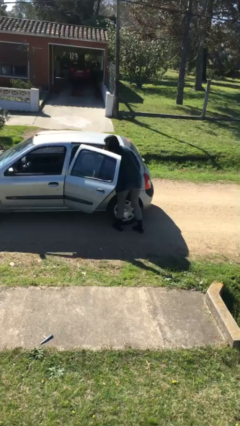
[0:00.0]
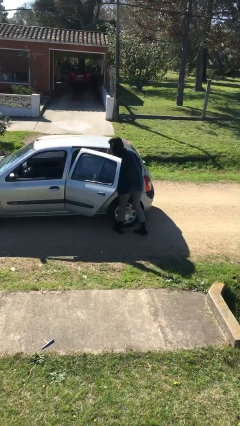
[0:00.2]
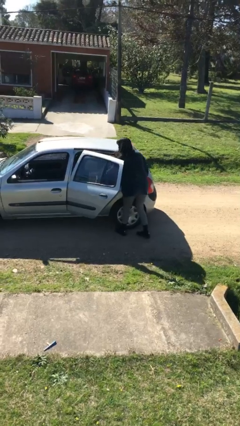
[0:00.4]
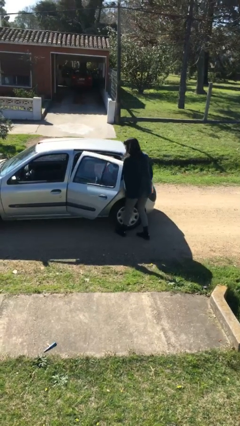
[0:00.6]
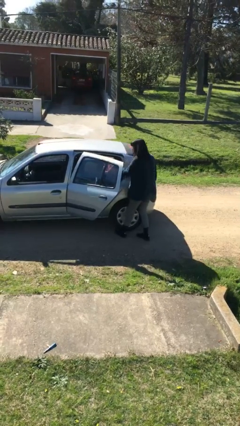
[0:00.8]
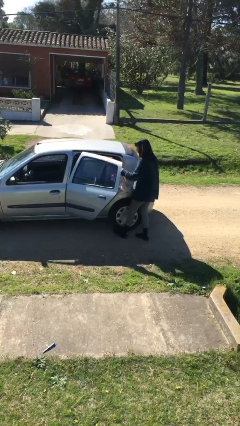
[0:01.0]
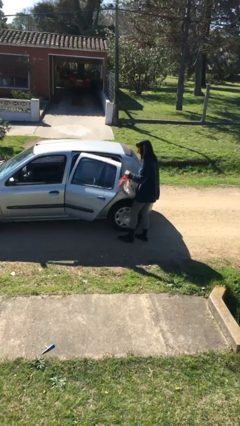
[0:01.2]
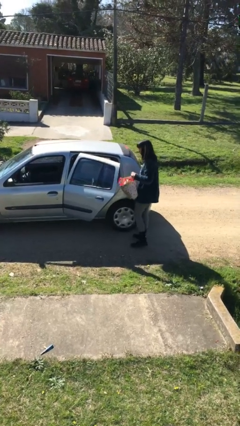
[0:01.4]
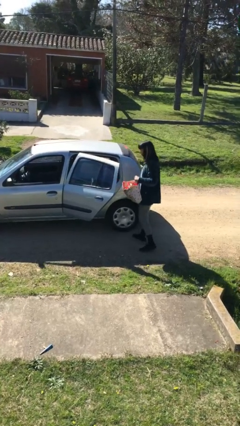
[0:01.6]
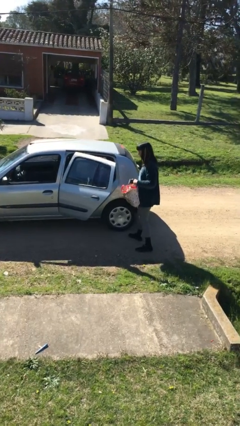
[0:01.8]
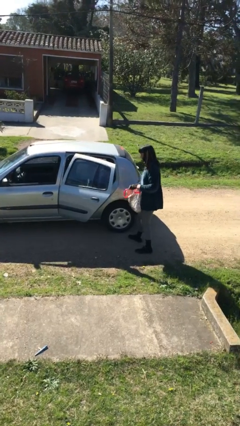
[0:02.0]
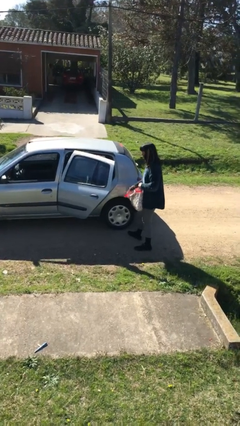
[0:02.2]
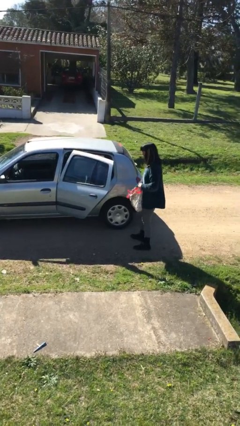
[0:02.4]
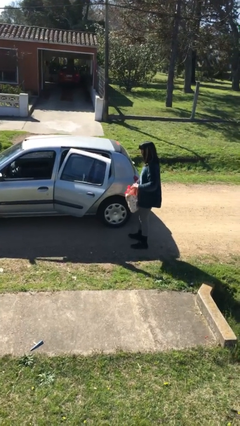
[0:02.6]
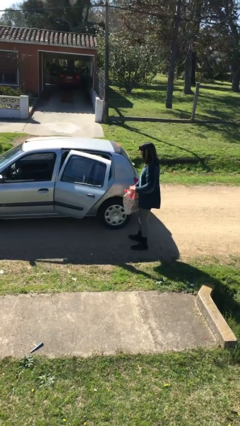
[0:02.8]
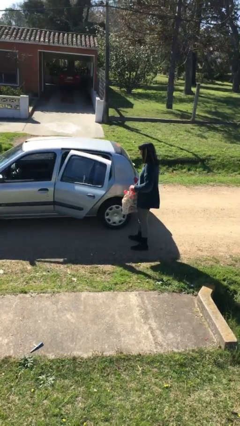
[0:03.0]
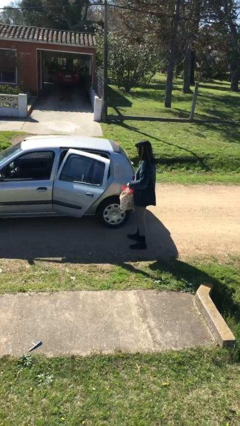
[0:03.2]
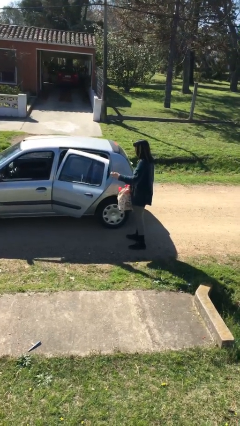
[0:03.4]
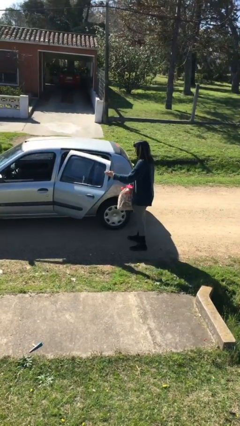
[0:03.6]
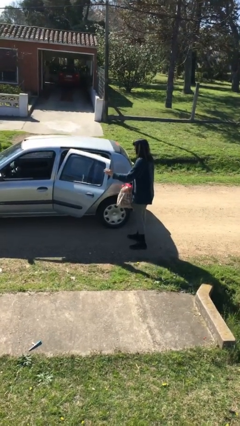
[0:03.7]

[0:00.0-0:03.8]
person unloads car

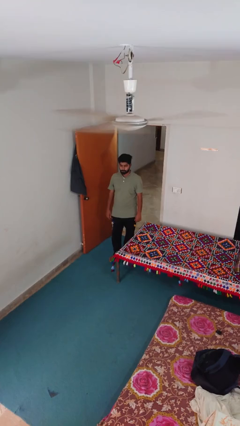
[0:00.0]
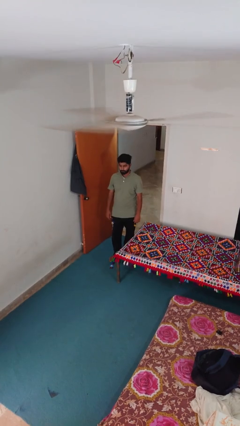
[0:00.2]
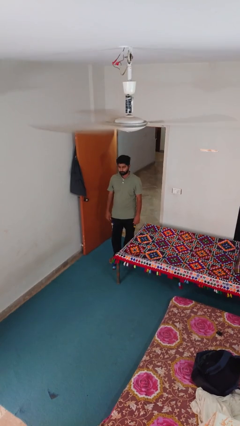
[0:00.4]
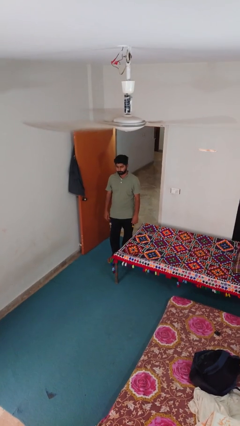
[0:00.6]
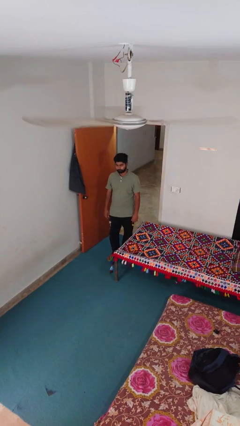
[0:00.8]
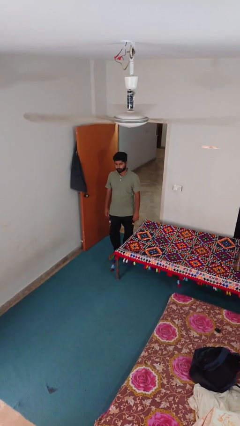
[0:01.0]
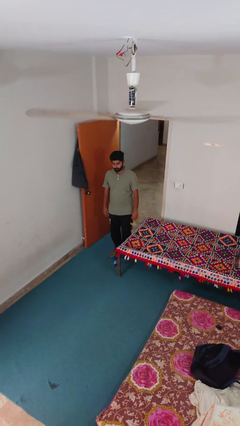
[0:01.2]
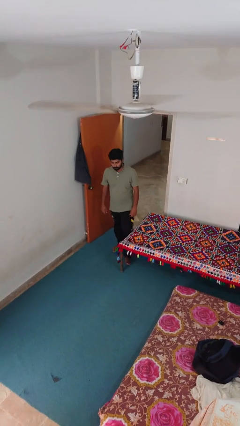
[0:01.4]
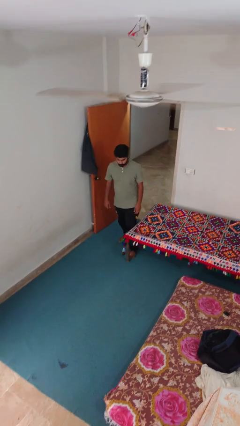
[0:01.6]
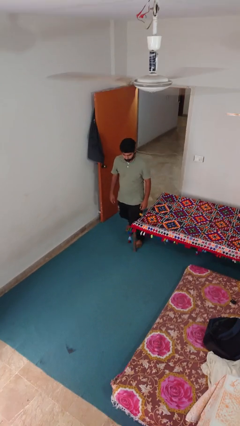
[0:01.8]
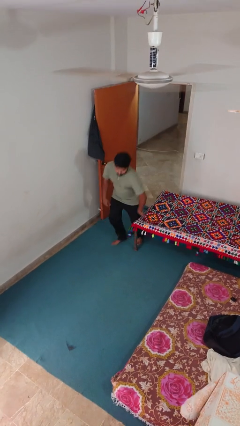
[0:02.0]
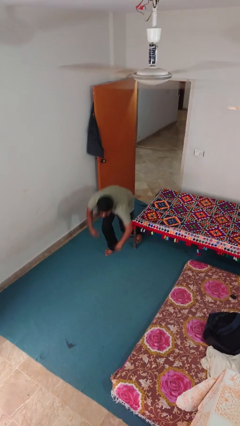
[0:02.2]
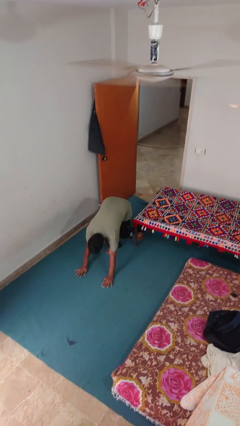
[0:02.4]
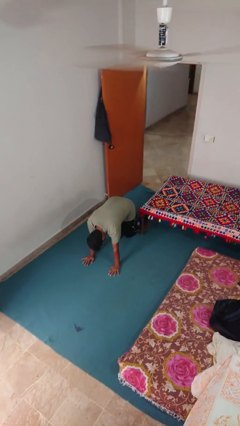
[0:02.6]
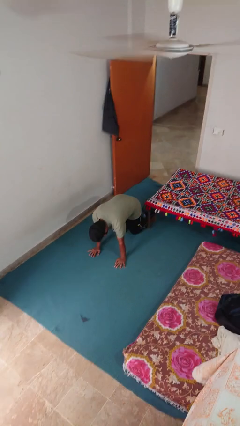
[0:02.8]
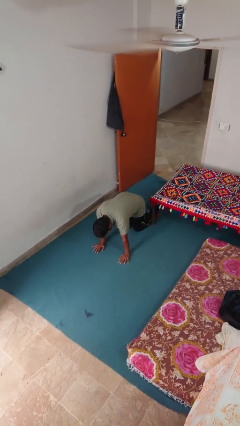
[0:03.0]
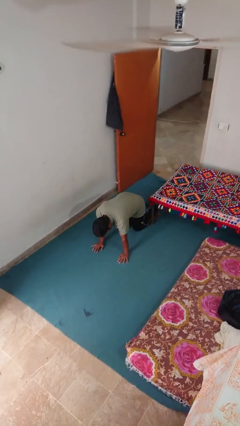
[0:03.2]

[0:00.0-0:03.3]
person trips on object on floor

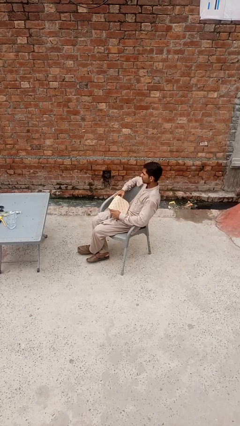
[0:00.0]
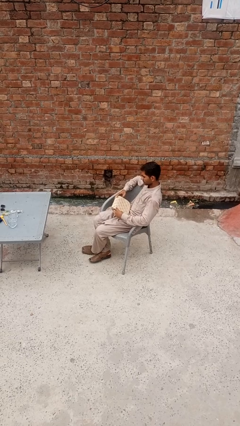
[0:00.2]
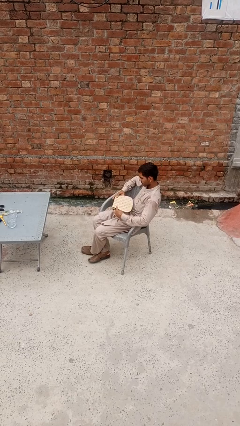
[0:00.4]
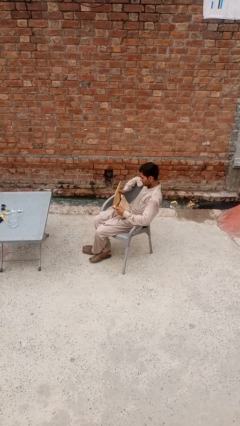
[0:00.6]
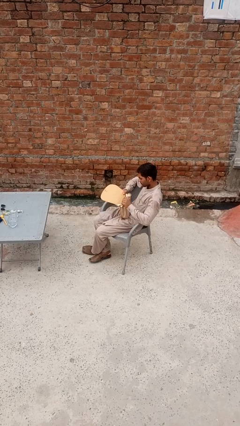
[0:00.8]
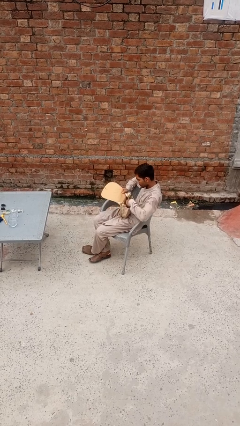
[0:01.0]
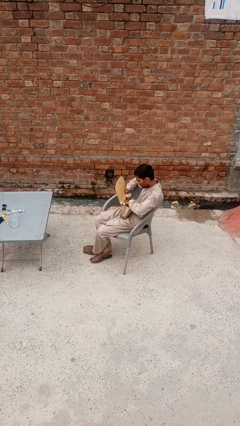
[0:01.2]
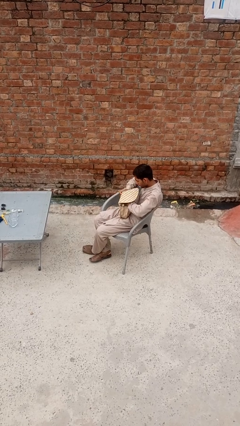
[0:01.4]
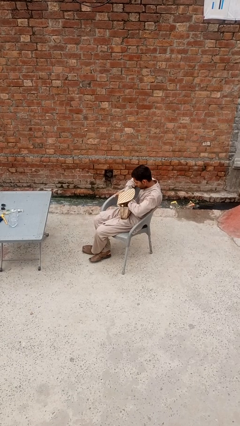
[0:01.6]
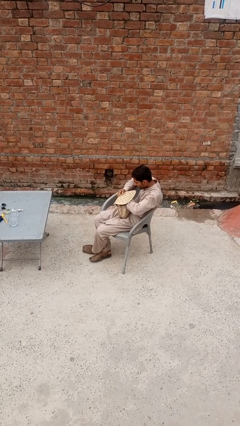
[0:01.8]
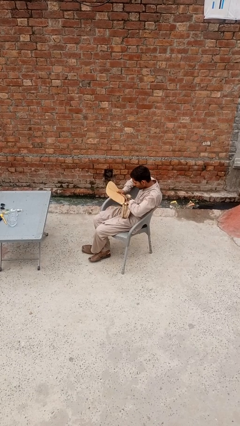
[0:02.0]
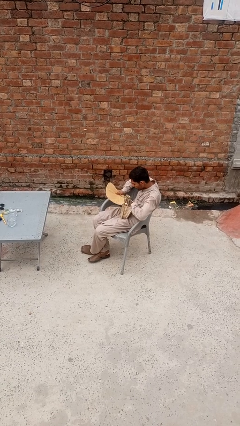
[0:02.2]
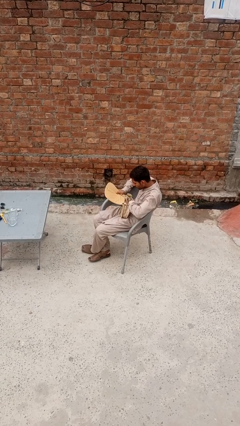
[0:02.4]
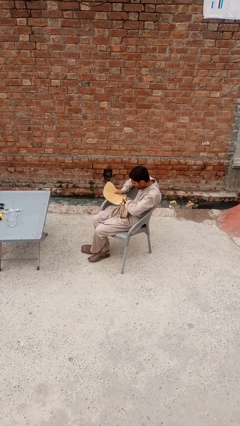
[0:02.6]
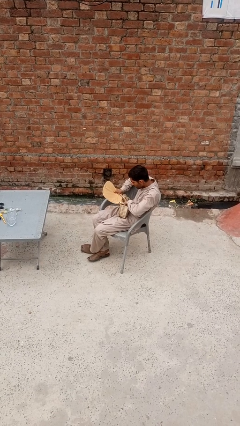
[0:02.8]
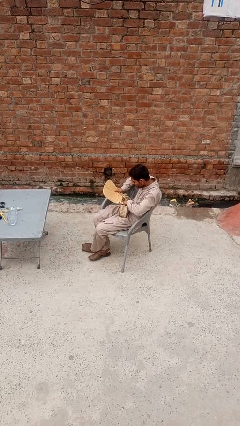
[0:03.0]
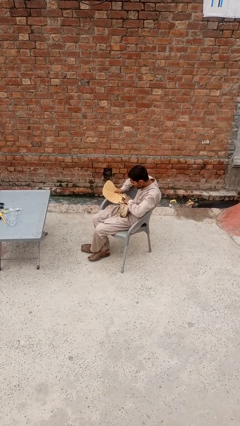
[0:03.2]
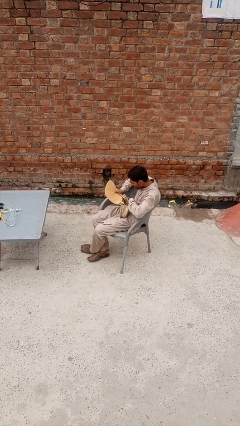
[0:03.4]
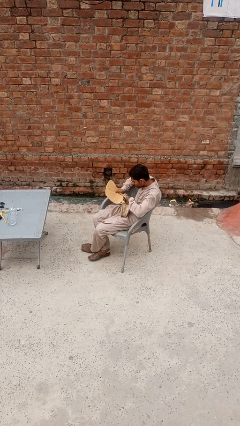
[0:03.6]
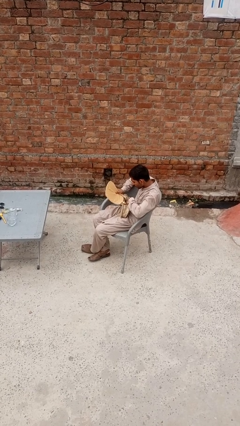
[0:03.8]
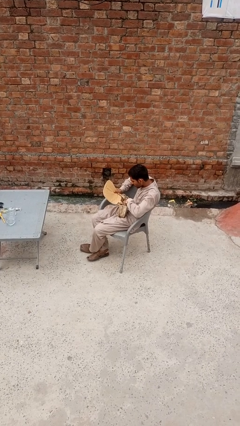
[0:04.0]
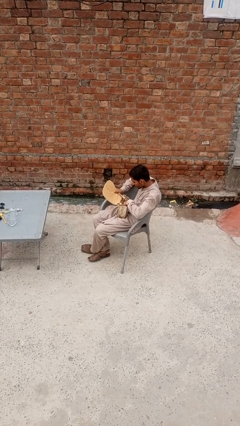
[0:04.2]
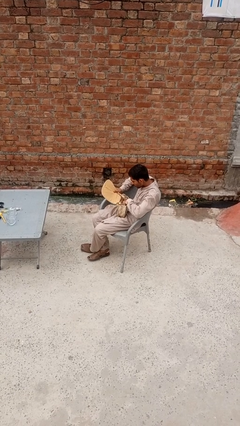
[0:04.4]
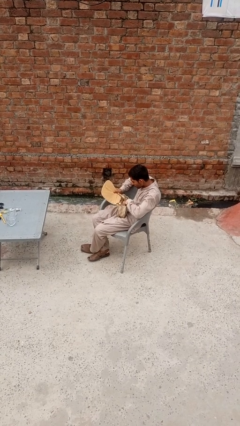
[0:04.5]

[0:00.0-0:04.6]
person searches in purse

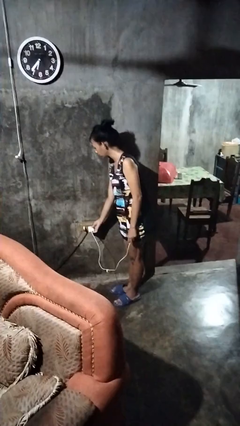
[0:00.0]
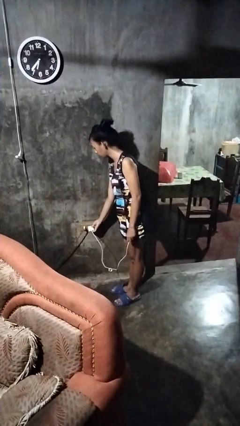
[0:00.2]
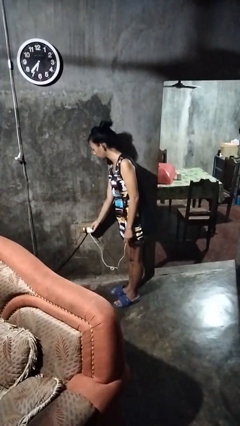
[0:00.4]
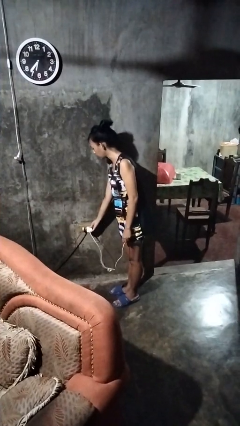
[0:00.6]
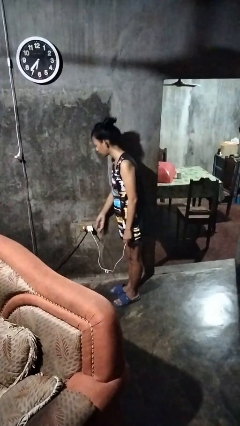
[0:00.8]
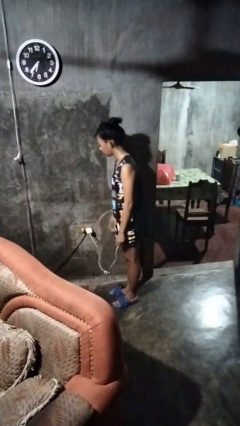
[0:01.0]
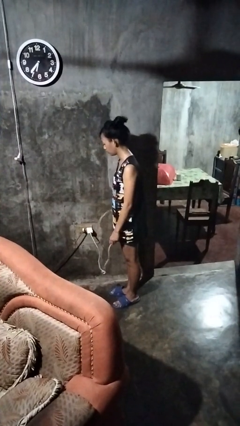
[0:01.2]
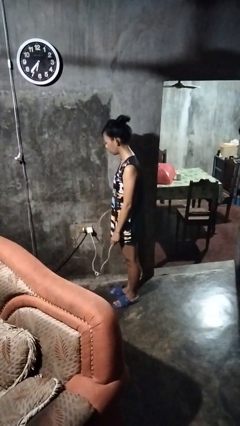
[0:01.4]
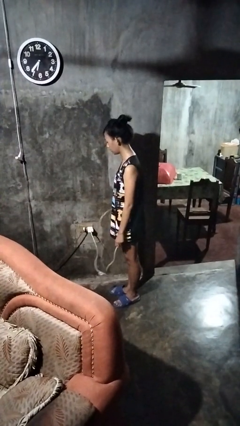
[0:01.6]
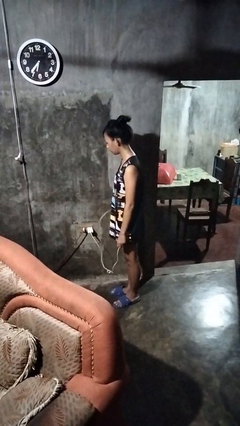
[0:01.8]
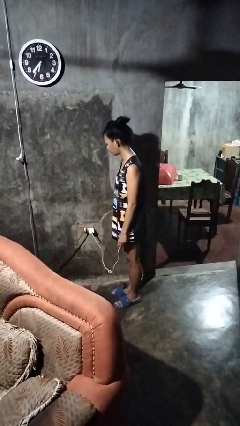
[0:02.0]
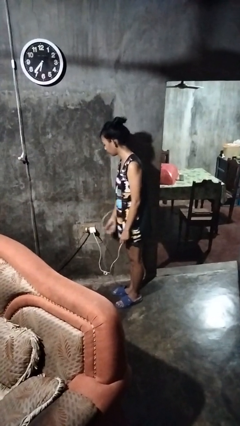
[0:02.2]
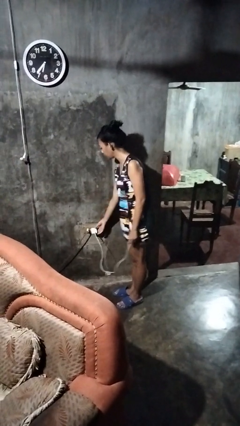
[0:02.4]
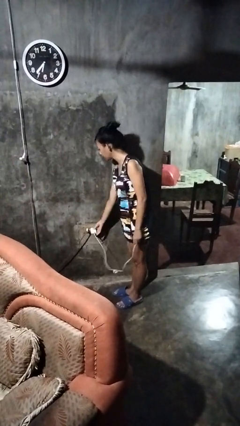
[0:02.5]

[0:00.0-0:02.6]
person plugs into electrical socket

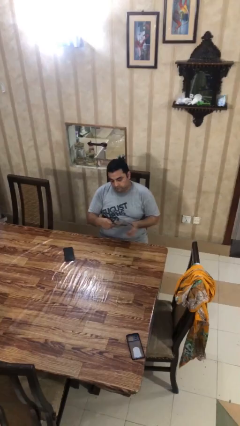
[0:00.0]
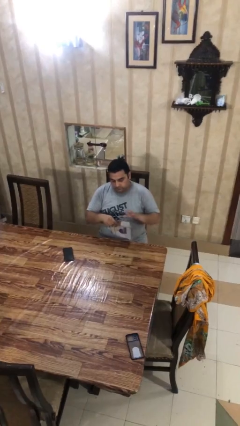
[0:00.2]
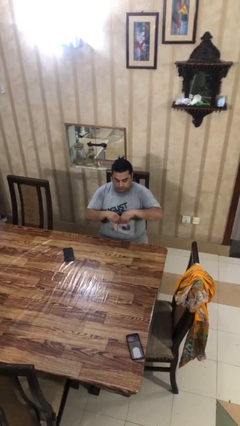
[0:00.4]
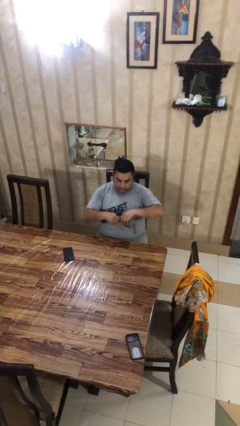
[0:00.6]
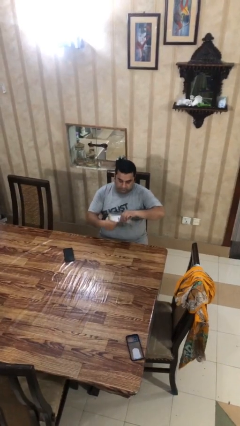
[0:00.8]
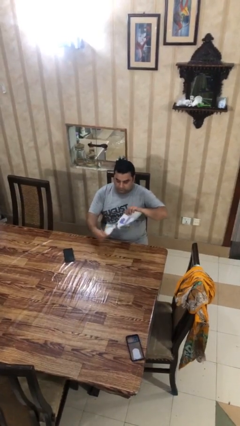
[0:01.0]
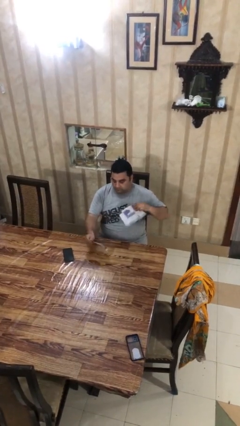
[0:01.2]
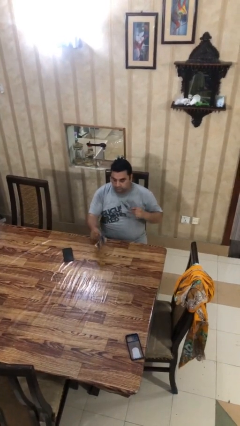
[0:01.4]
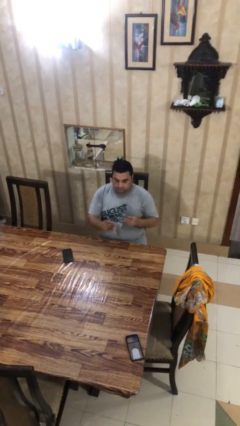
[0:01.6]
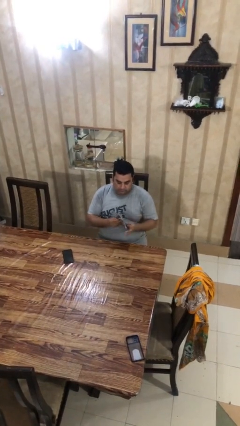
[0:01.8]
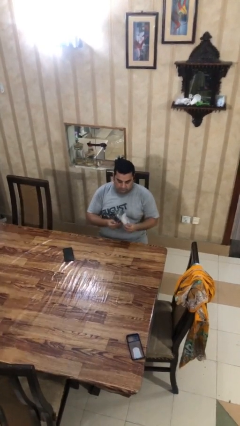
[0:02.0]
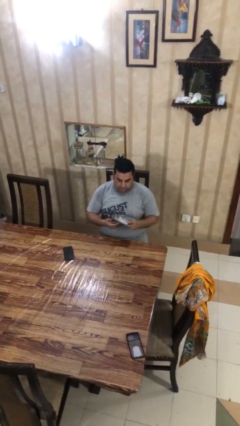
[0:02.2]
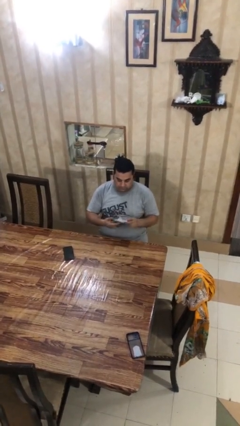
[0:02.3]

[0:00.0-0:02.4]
person tears paper

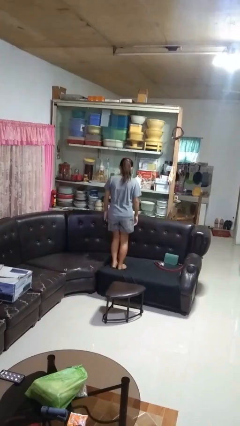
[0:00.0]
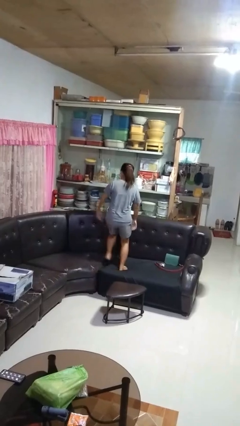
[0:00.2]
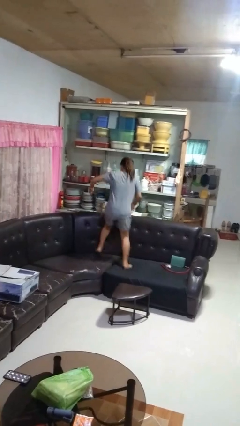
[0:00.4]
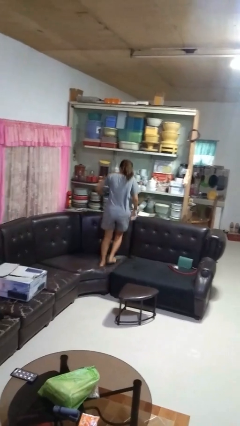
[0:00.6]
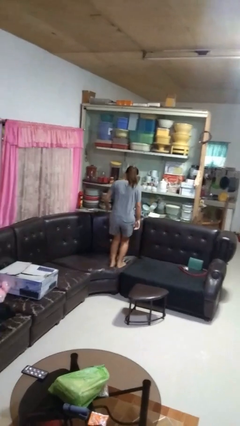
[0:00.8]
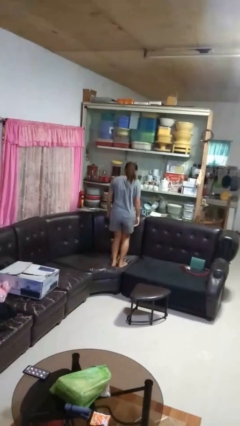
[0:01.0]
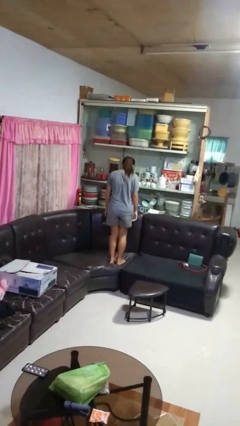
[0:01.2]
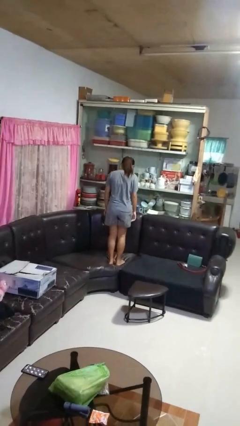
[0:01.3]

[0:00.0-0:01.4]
person jumps on couch
